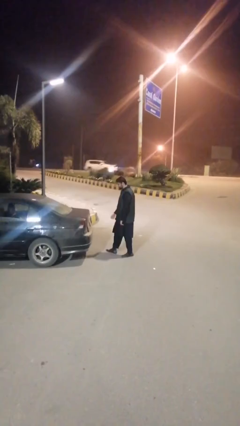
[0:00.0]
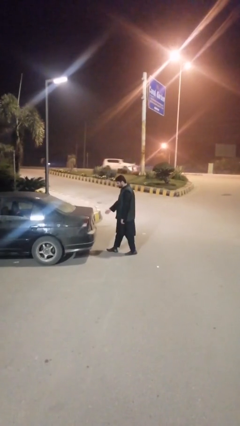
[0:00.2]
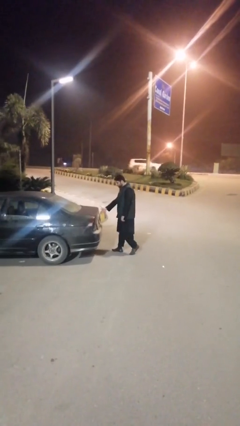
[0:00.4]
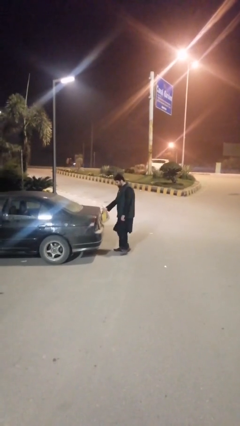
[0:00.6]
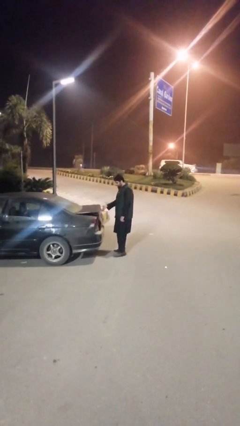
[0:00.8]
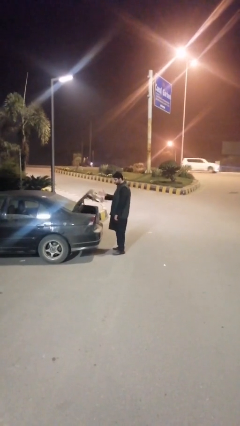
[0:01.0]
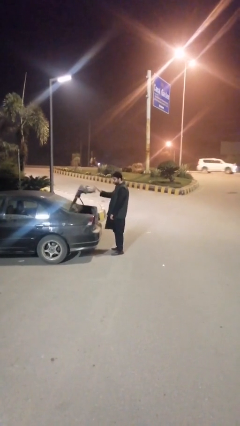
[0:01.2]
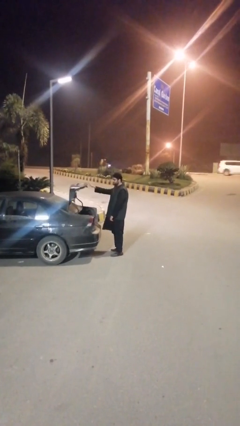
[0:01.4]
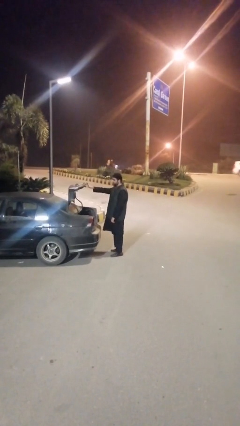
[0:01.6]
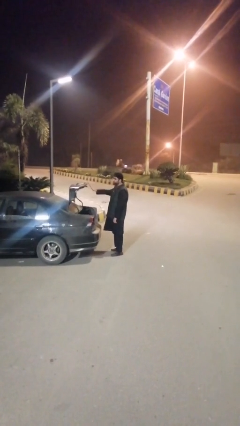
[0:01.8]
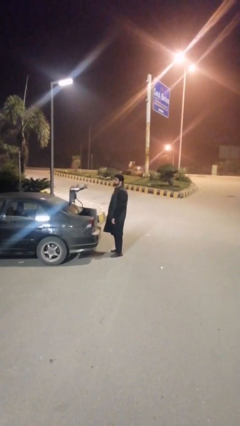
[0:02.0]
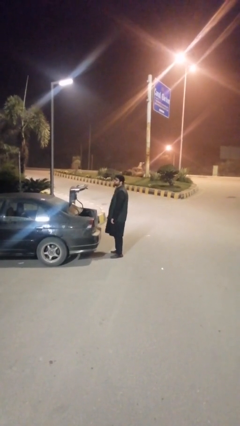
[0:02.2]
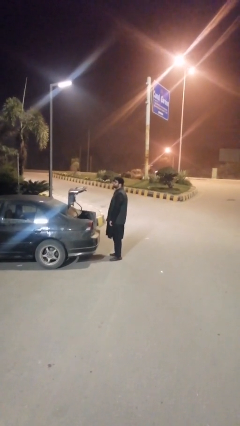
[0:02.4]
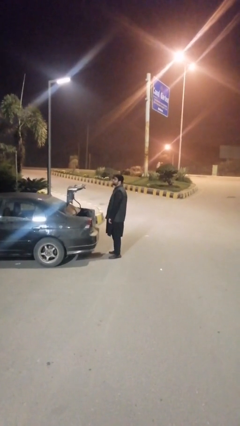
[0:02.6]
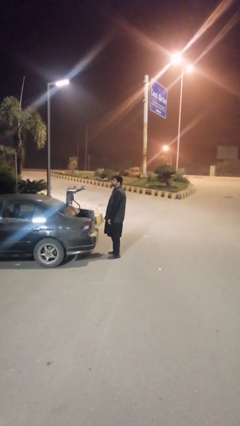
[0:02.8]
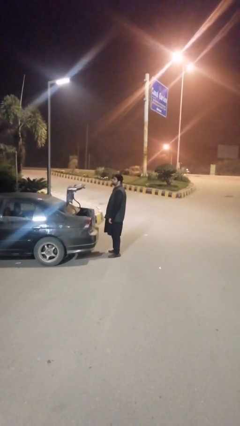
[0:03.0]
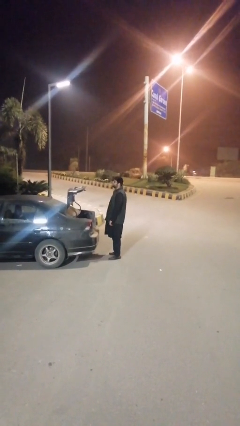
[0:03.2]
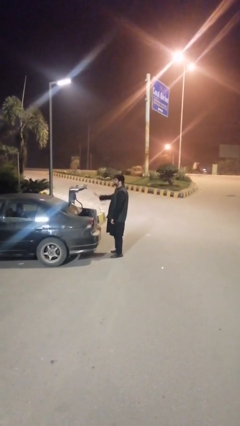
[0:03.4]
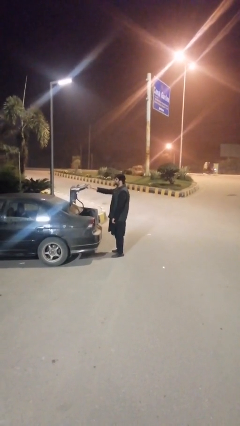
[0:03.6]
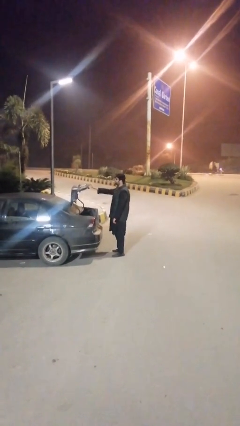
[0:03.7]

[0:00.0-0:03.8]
person opens car trunk

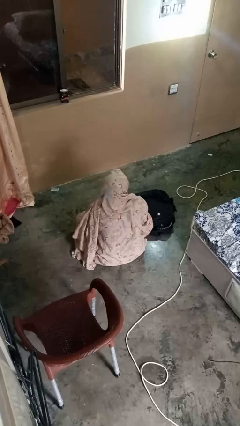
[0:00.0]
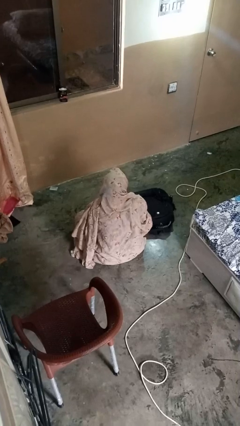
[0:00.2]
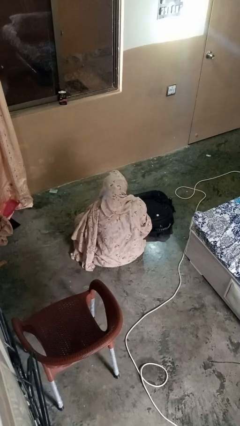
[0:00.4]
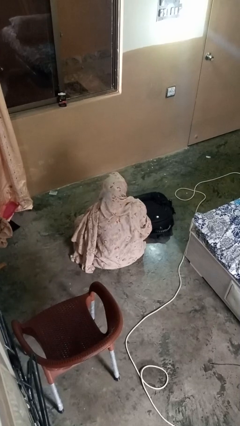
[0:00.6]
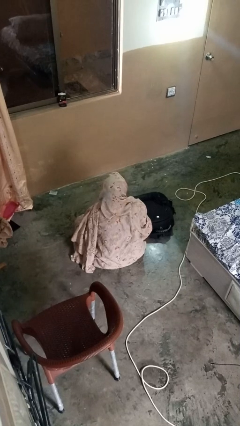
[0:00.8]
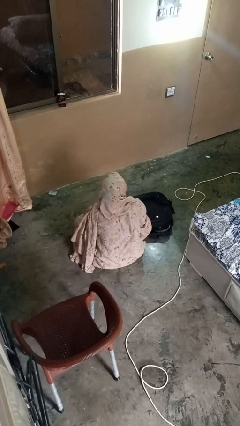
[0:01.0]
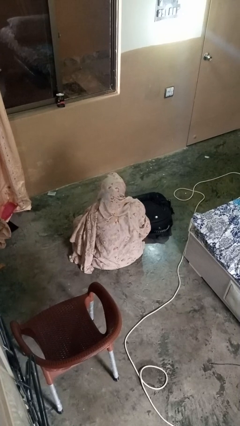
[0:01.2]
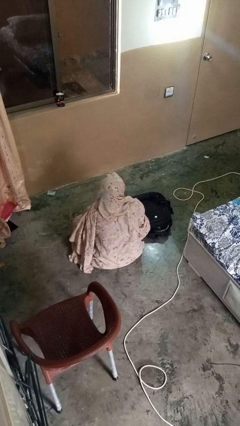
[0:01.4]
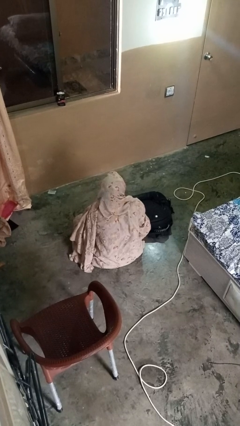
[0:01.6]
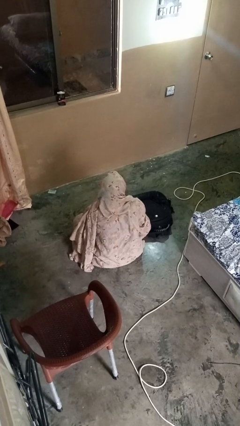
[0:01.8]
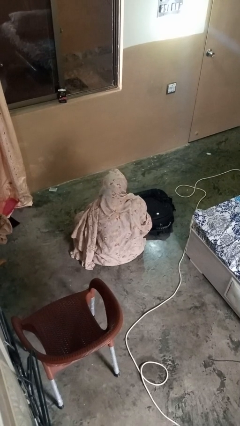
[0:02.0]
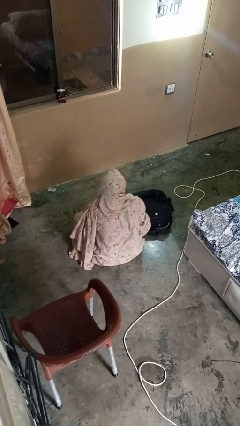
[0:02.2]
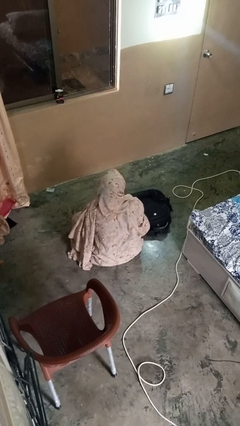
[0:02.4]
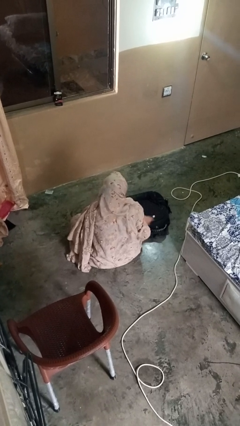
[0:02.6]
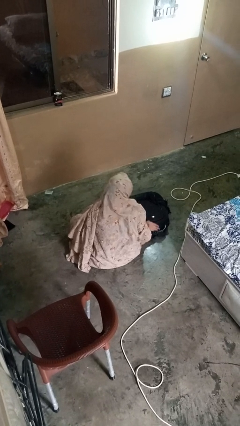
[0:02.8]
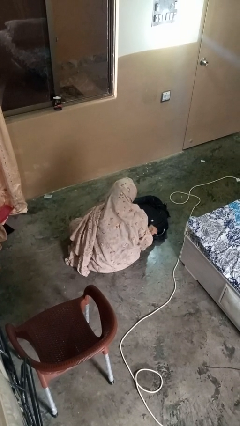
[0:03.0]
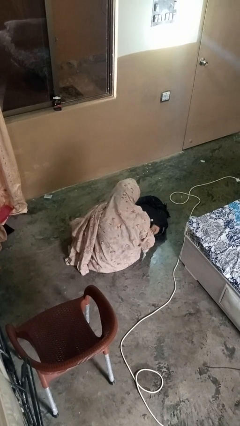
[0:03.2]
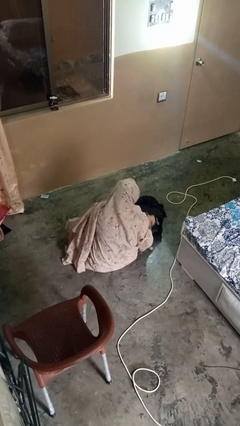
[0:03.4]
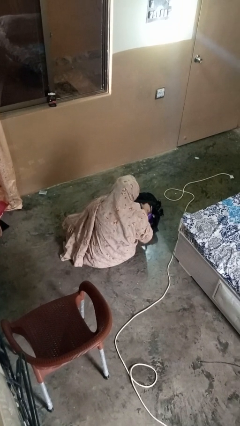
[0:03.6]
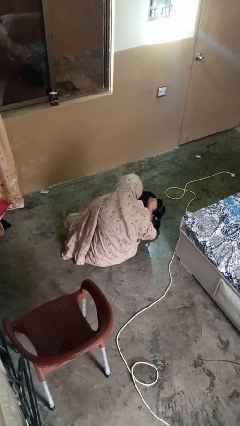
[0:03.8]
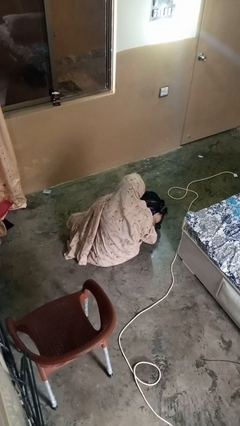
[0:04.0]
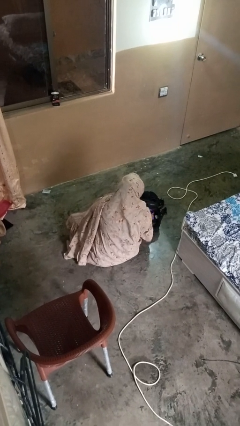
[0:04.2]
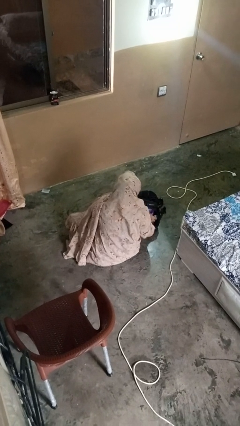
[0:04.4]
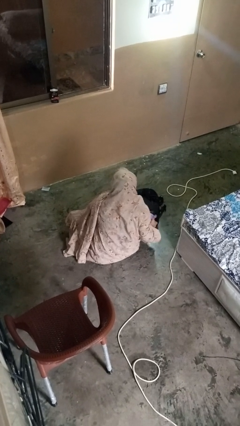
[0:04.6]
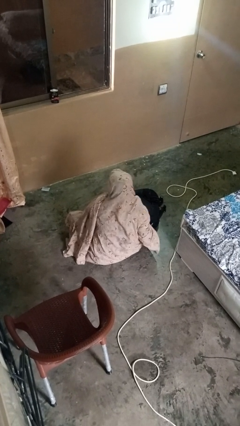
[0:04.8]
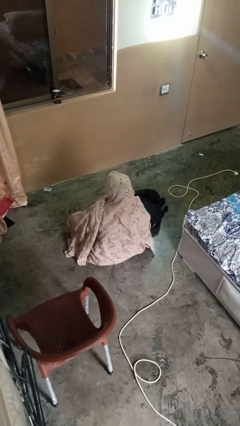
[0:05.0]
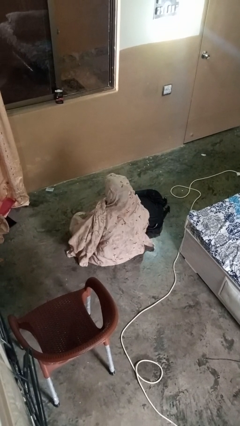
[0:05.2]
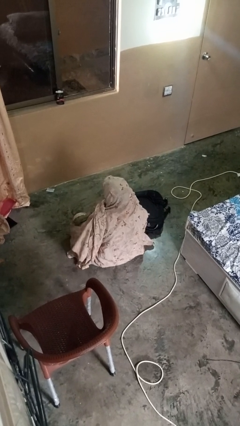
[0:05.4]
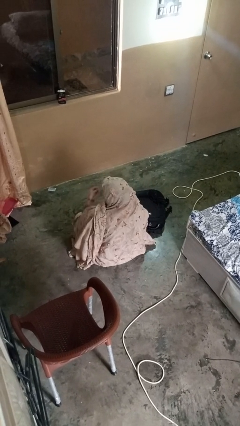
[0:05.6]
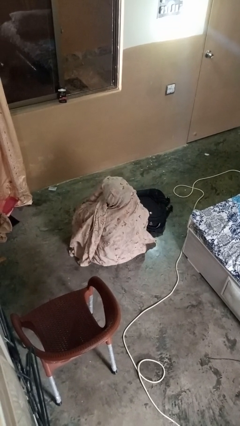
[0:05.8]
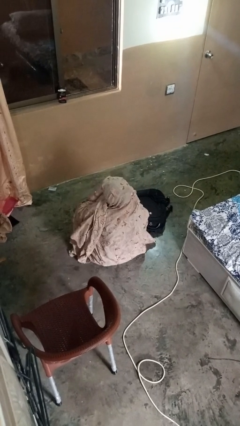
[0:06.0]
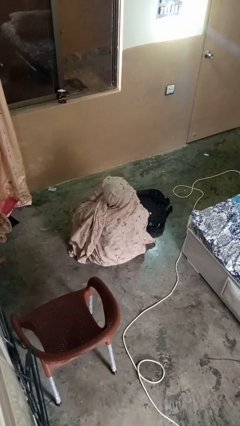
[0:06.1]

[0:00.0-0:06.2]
person eats snack from bag

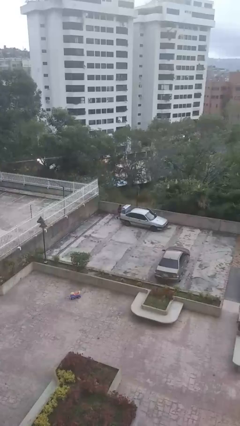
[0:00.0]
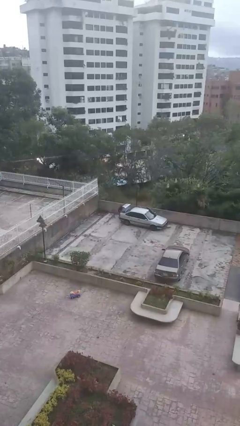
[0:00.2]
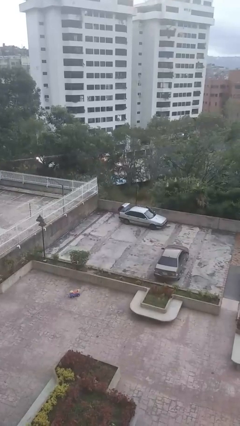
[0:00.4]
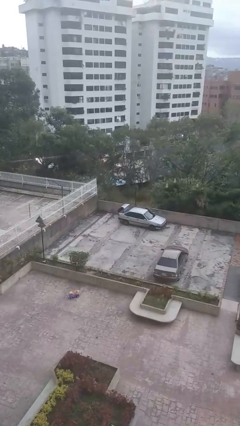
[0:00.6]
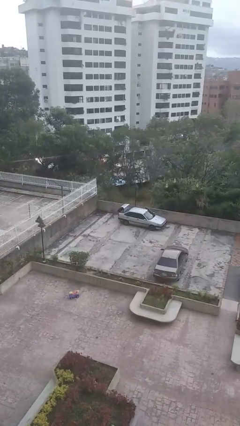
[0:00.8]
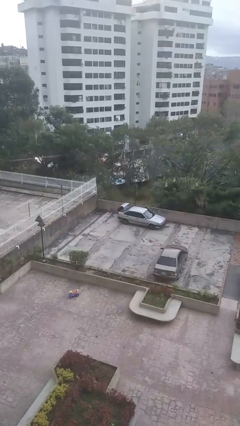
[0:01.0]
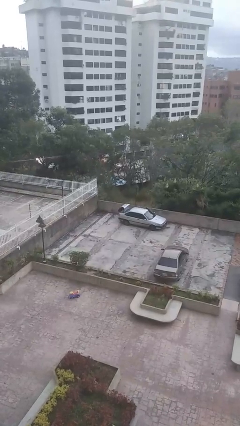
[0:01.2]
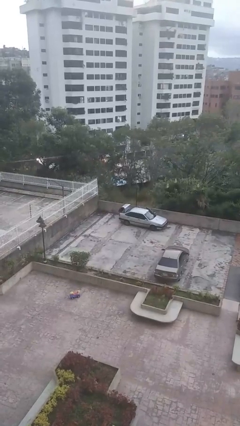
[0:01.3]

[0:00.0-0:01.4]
person loads car

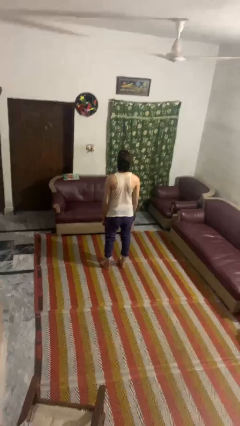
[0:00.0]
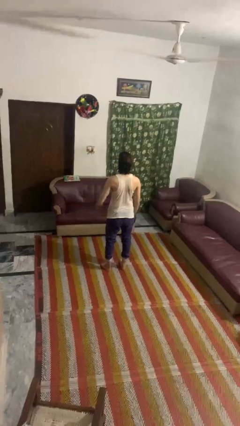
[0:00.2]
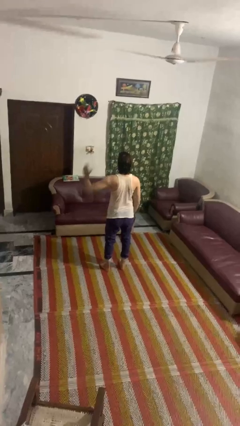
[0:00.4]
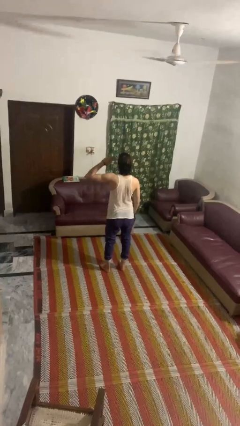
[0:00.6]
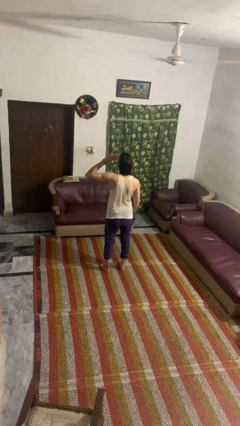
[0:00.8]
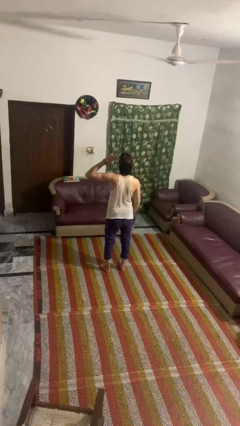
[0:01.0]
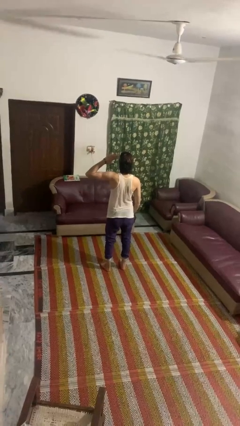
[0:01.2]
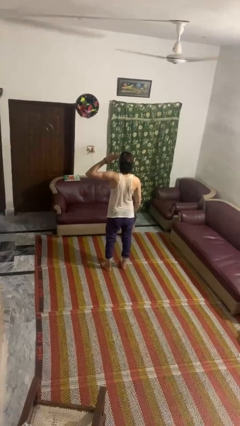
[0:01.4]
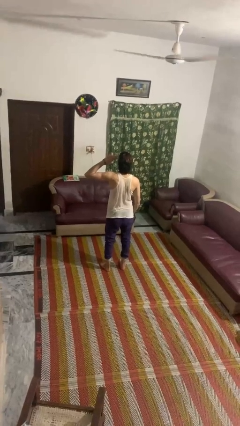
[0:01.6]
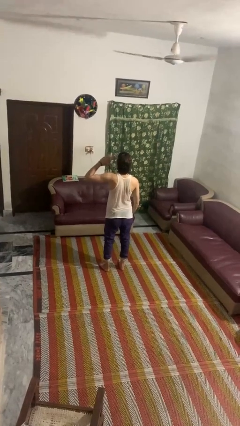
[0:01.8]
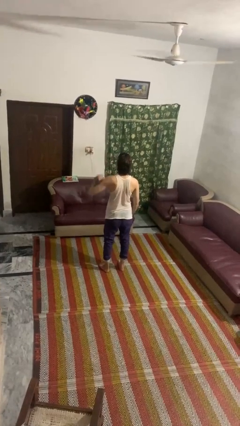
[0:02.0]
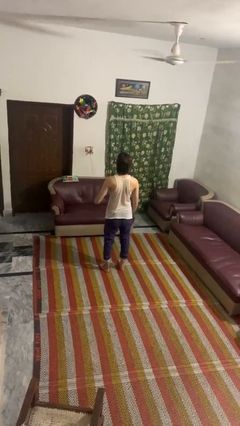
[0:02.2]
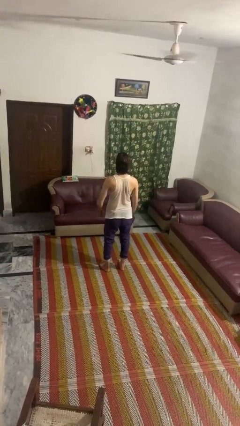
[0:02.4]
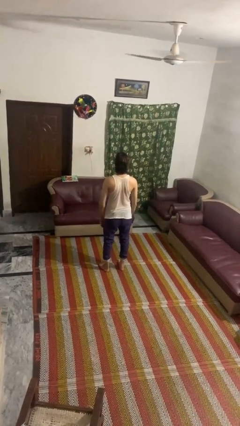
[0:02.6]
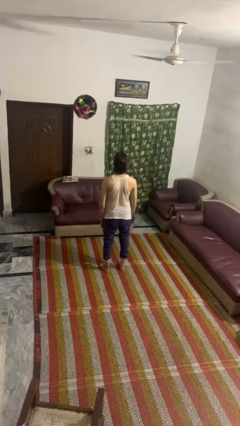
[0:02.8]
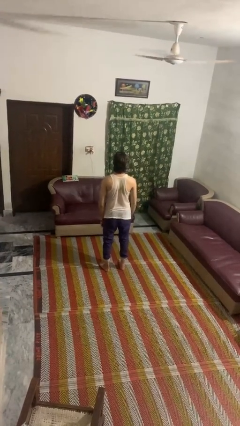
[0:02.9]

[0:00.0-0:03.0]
person salutes

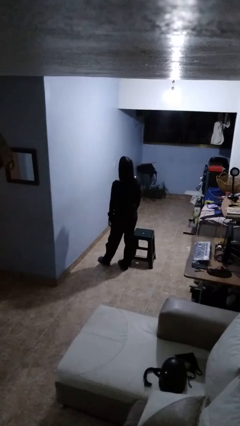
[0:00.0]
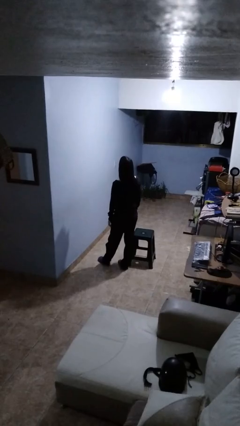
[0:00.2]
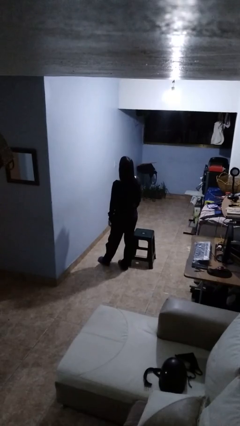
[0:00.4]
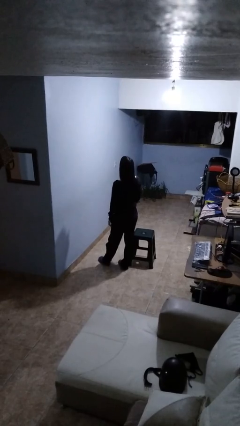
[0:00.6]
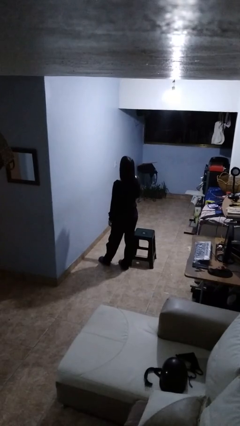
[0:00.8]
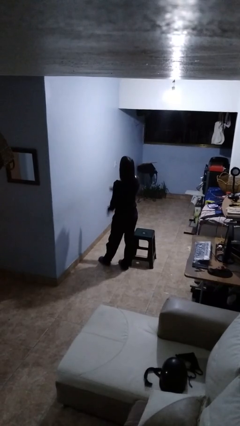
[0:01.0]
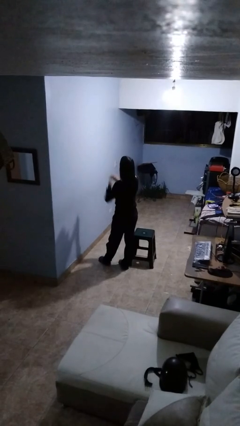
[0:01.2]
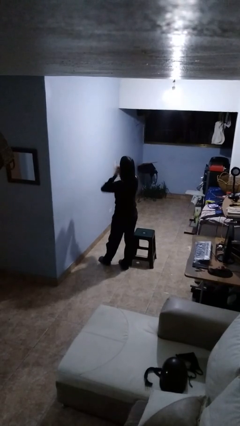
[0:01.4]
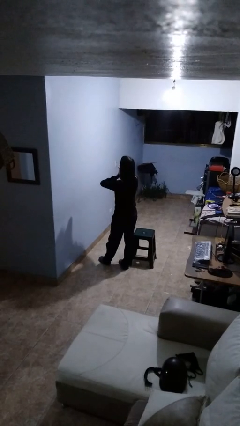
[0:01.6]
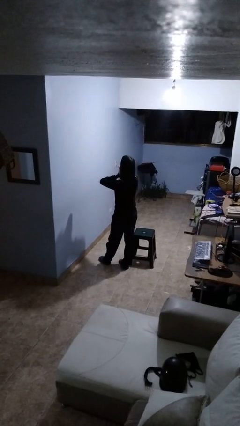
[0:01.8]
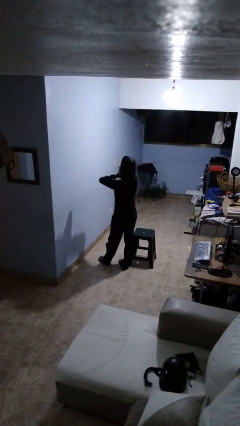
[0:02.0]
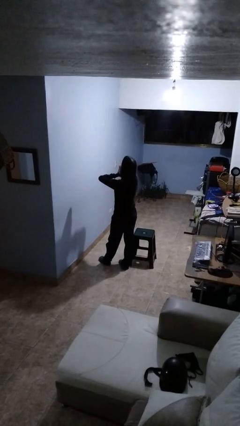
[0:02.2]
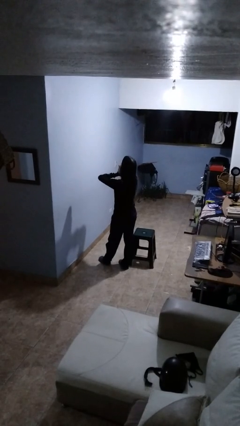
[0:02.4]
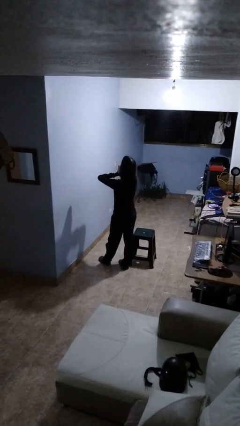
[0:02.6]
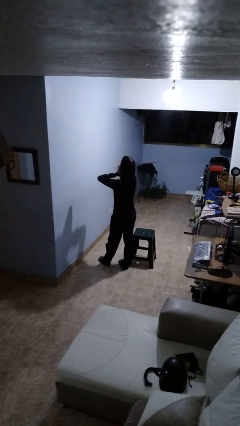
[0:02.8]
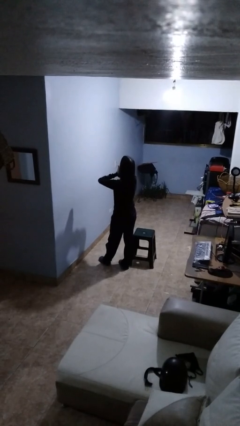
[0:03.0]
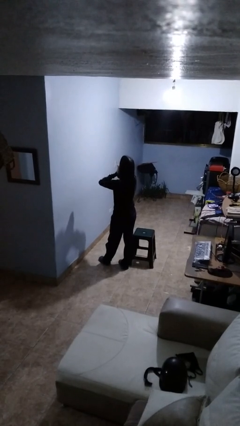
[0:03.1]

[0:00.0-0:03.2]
person yawns
